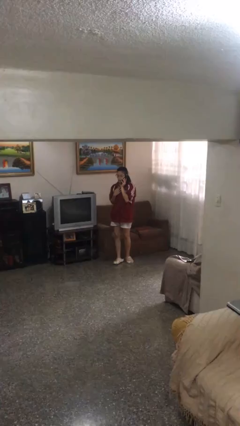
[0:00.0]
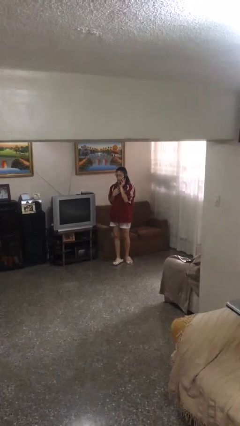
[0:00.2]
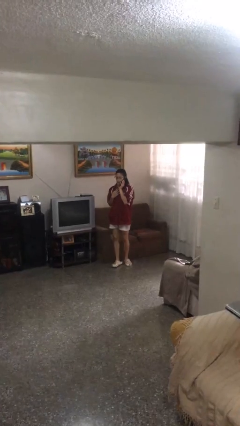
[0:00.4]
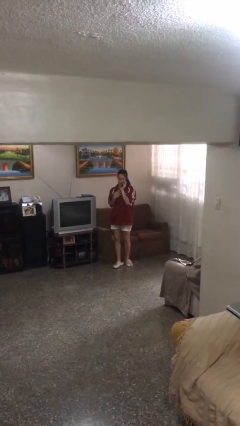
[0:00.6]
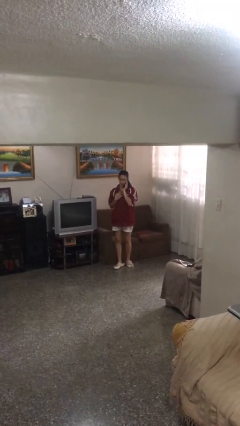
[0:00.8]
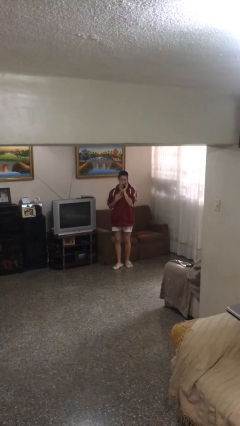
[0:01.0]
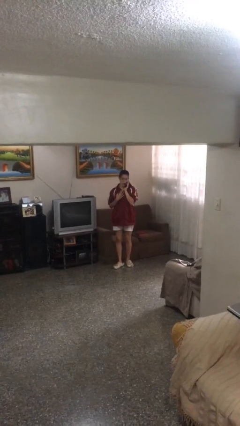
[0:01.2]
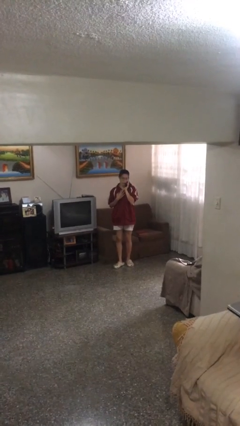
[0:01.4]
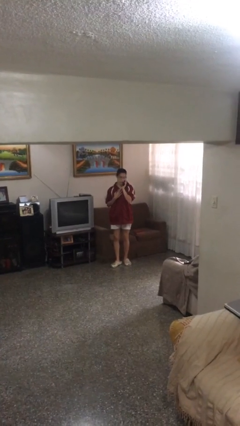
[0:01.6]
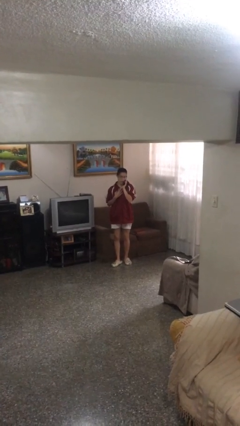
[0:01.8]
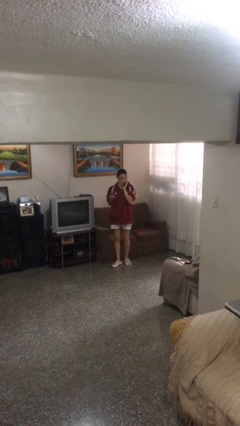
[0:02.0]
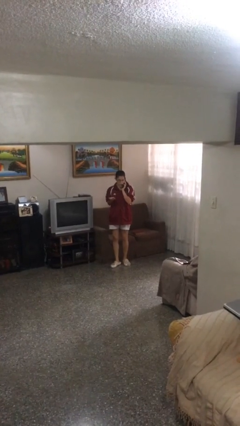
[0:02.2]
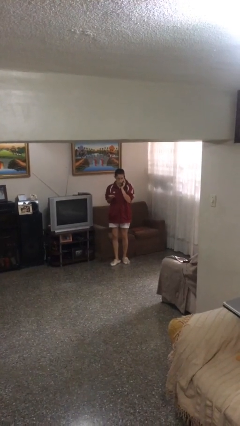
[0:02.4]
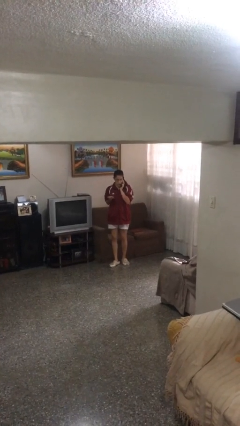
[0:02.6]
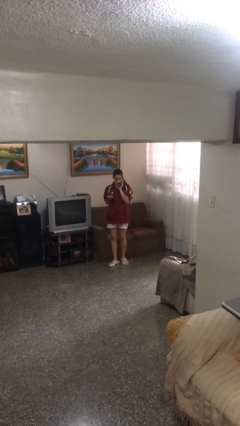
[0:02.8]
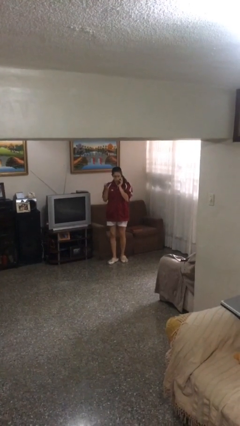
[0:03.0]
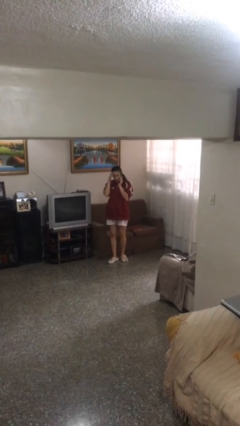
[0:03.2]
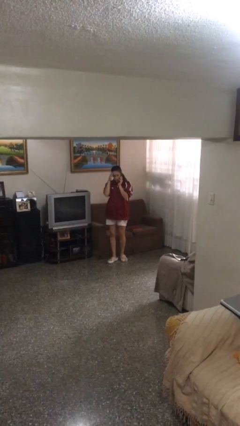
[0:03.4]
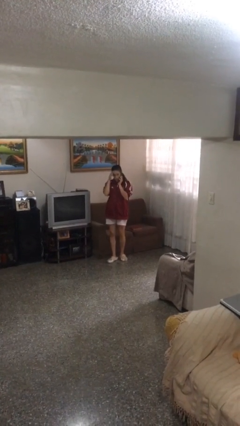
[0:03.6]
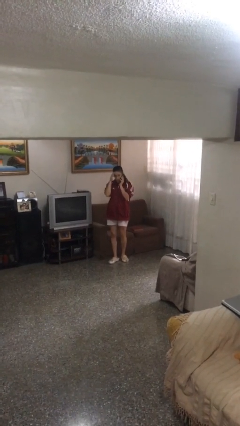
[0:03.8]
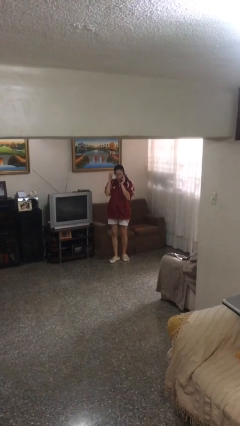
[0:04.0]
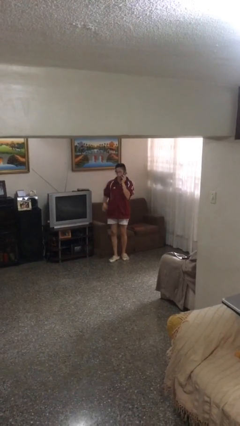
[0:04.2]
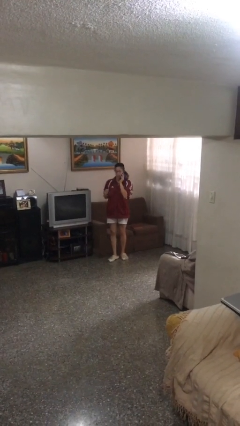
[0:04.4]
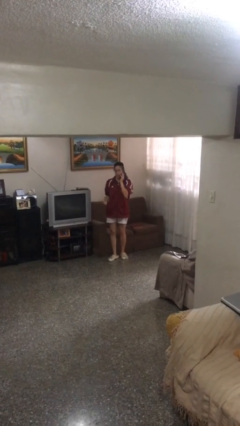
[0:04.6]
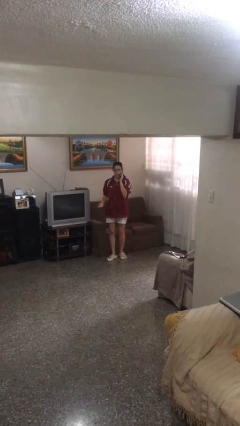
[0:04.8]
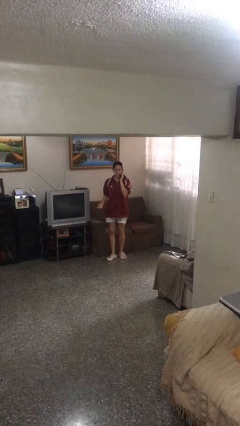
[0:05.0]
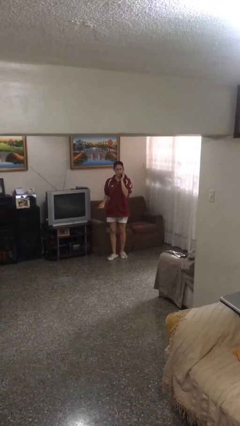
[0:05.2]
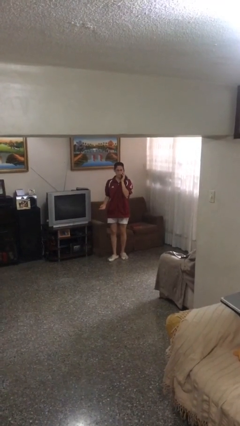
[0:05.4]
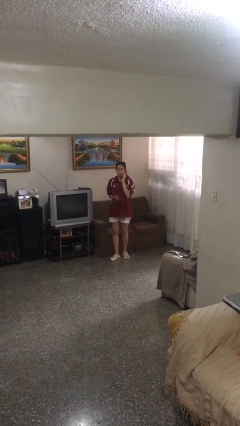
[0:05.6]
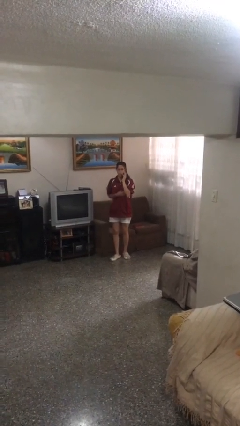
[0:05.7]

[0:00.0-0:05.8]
person talks on phone

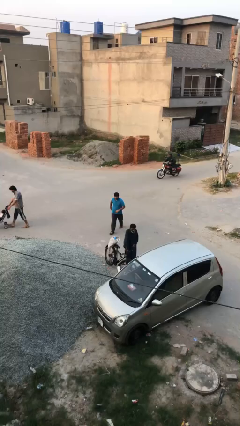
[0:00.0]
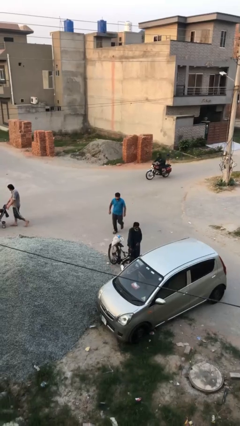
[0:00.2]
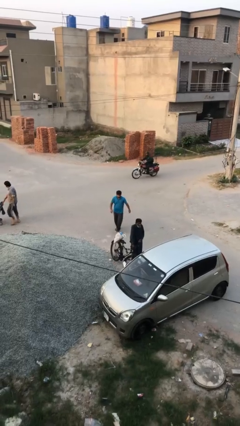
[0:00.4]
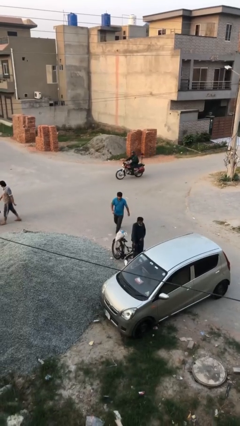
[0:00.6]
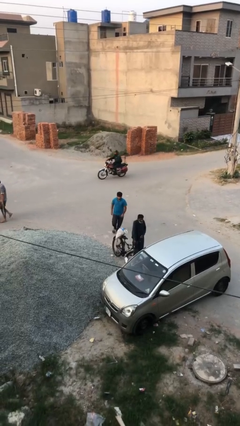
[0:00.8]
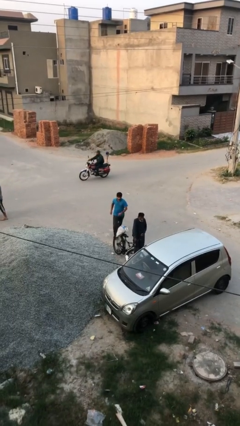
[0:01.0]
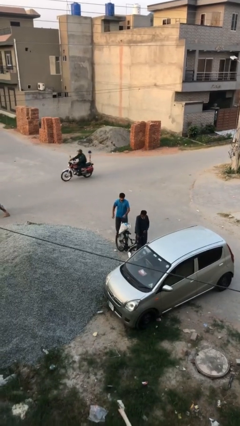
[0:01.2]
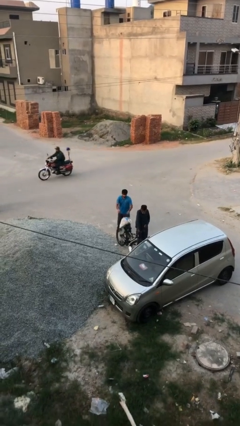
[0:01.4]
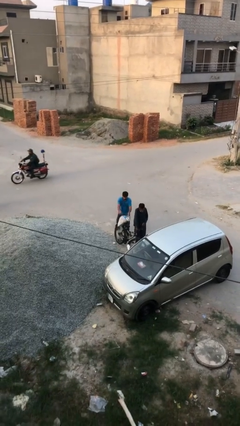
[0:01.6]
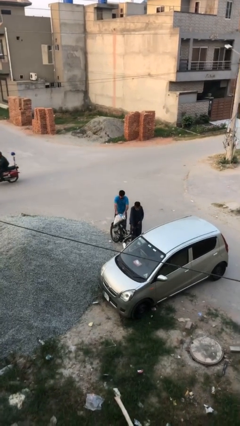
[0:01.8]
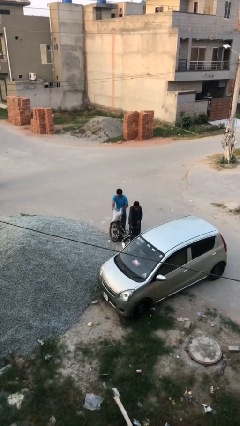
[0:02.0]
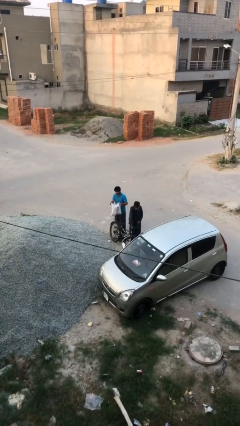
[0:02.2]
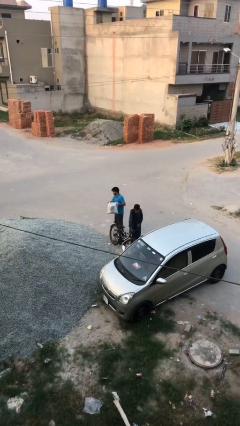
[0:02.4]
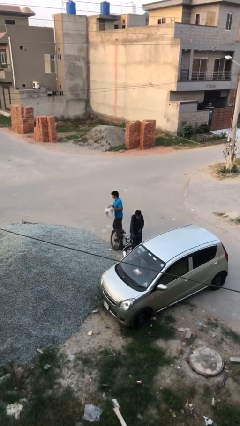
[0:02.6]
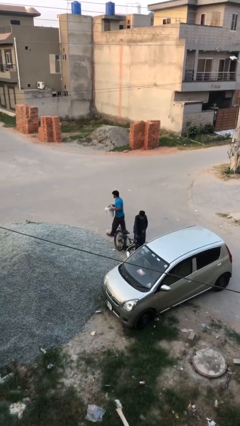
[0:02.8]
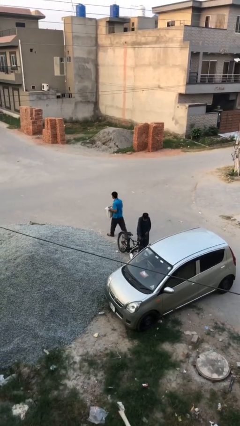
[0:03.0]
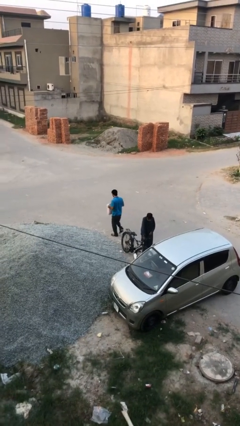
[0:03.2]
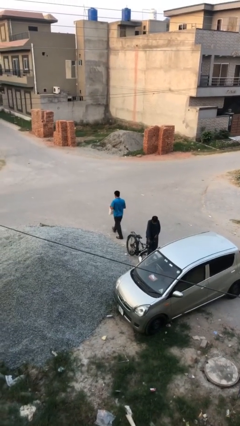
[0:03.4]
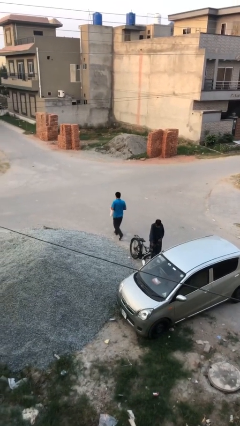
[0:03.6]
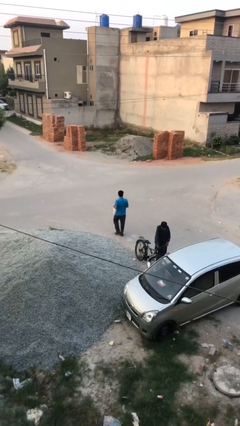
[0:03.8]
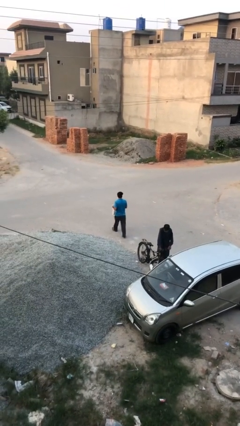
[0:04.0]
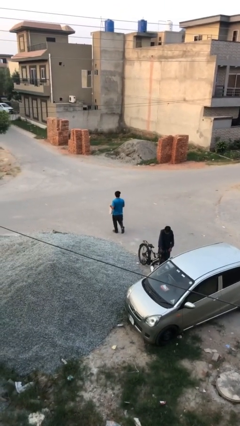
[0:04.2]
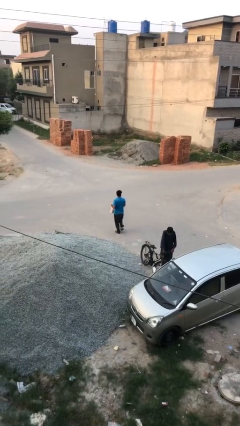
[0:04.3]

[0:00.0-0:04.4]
person steals object from person

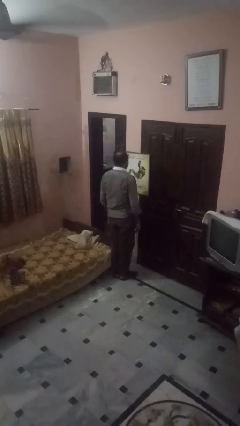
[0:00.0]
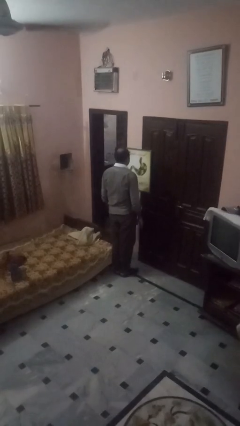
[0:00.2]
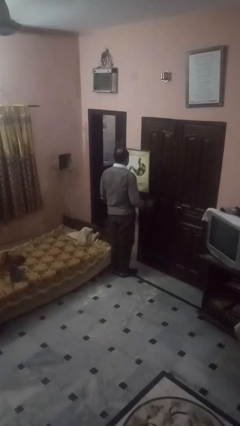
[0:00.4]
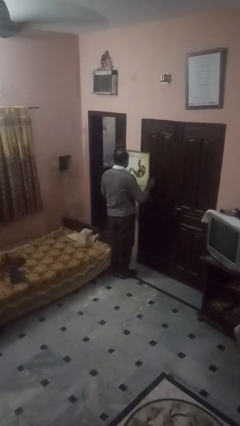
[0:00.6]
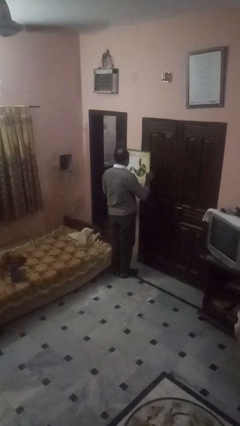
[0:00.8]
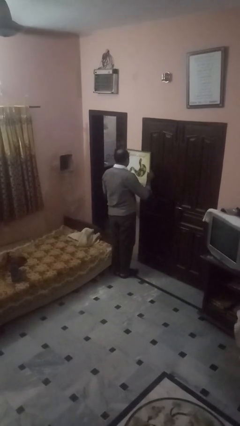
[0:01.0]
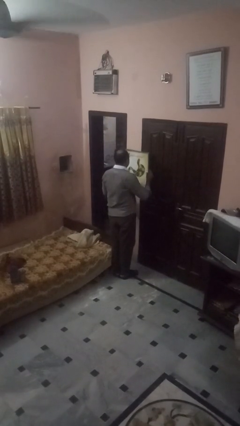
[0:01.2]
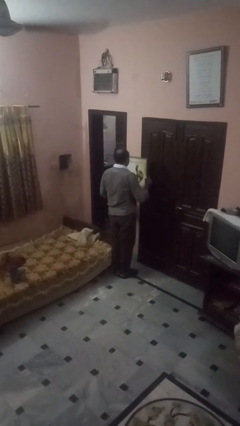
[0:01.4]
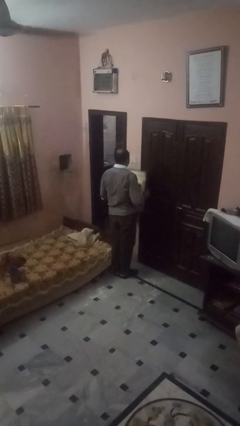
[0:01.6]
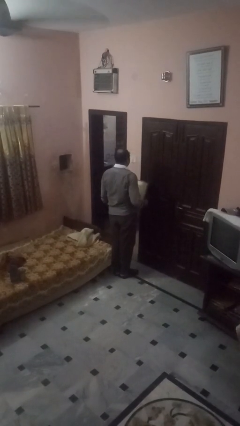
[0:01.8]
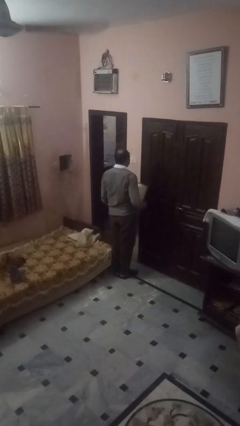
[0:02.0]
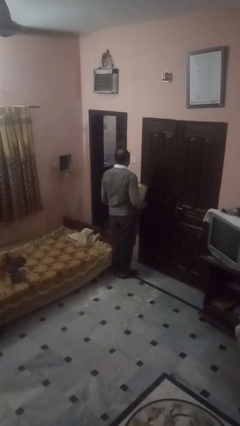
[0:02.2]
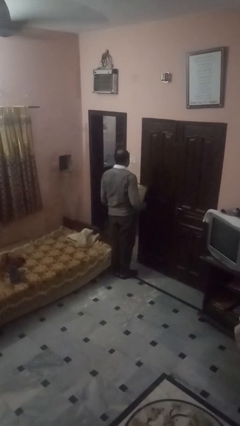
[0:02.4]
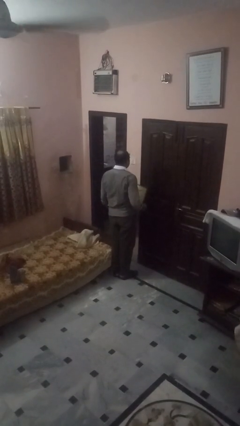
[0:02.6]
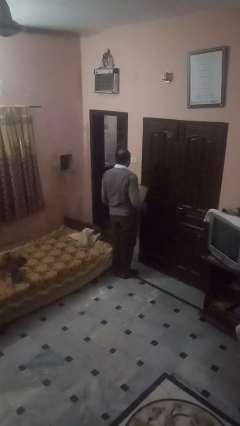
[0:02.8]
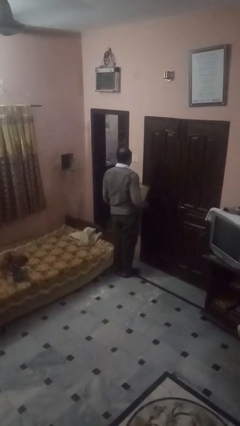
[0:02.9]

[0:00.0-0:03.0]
person takes down picture frame

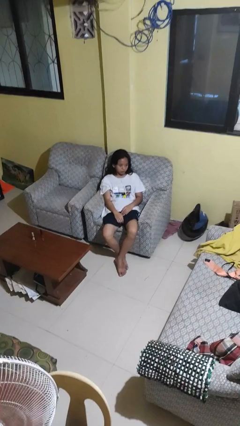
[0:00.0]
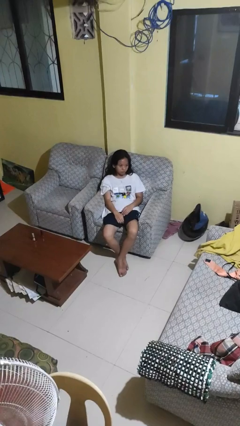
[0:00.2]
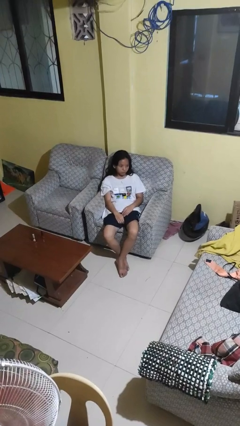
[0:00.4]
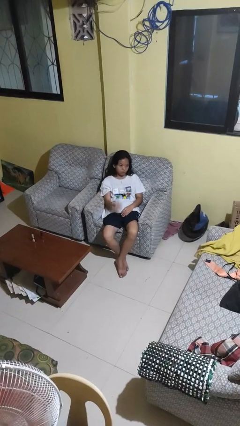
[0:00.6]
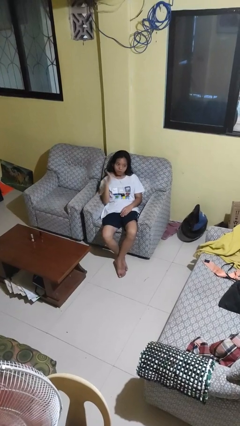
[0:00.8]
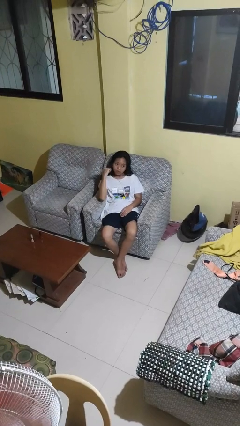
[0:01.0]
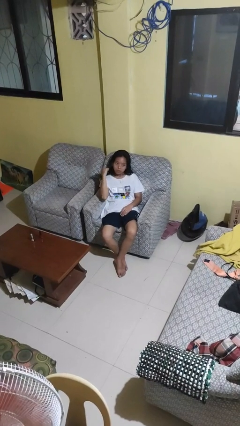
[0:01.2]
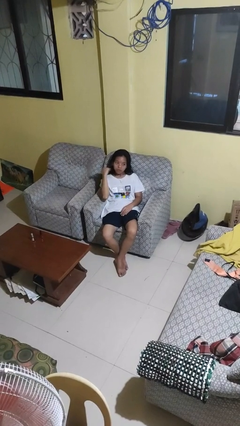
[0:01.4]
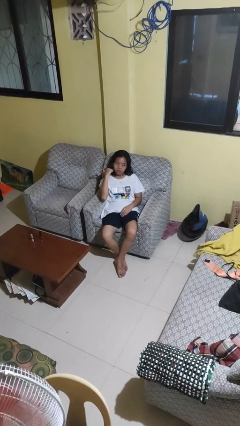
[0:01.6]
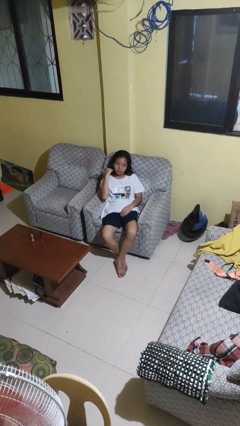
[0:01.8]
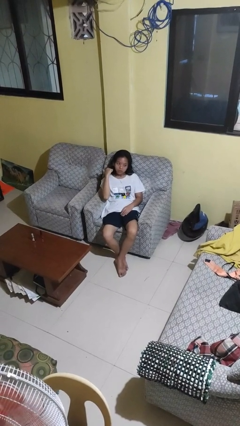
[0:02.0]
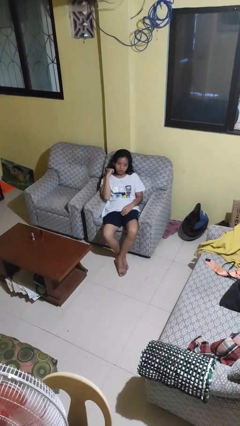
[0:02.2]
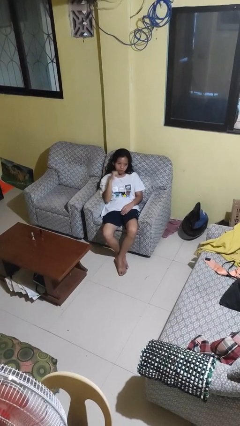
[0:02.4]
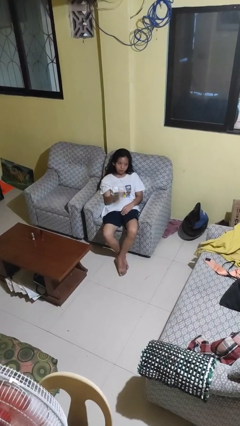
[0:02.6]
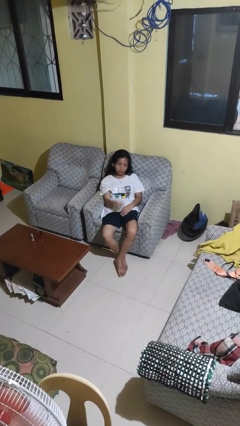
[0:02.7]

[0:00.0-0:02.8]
person gestures behind me

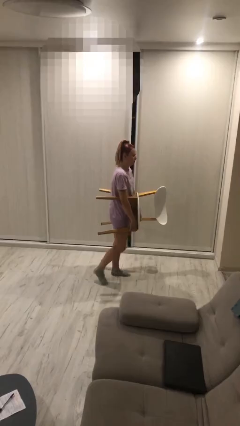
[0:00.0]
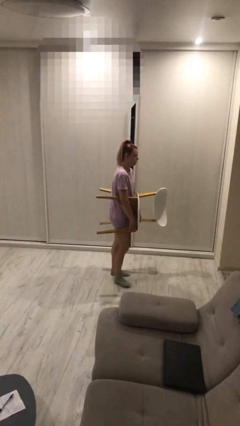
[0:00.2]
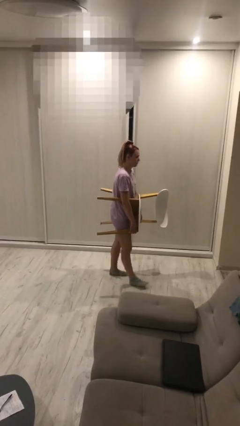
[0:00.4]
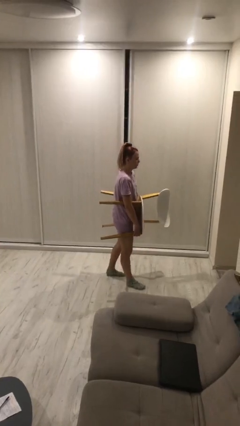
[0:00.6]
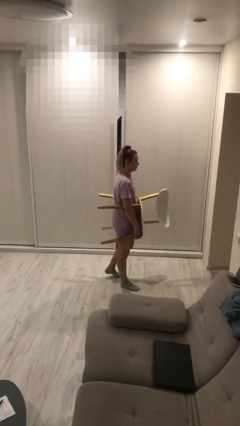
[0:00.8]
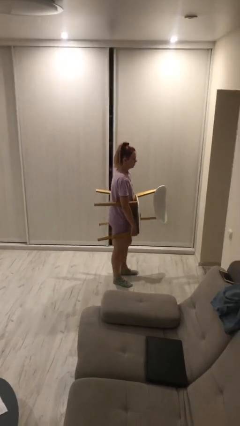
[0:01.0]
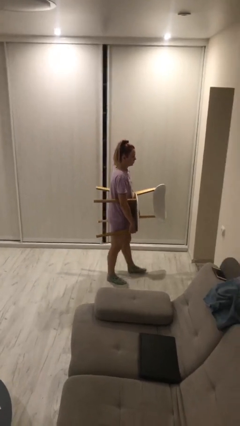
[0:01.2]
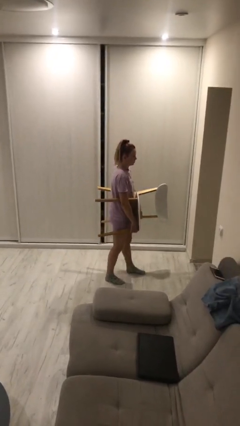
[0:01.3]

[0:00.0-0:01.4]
person carries furniture
